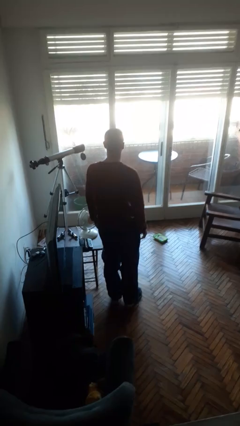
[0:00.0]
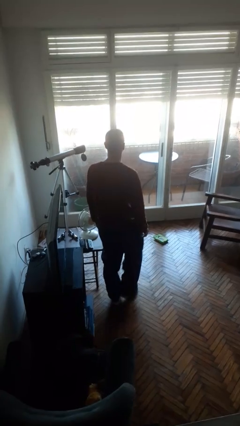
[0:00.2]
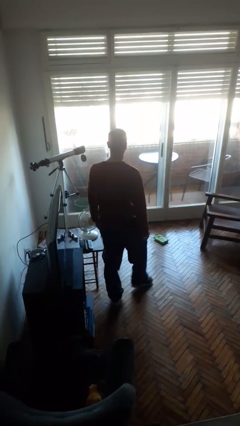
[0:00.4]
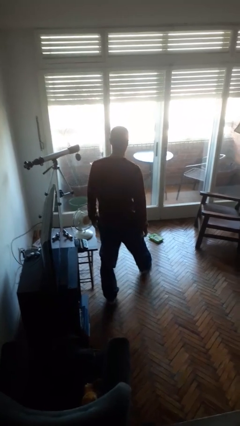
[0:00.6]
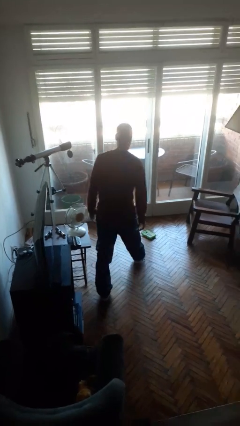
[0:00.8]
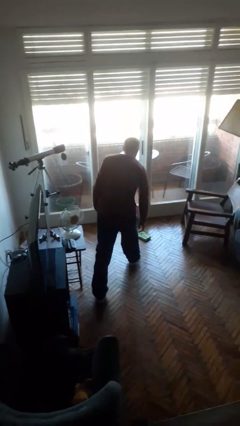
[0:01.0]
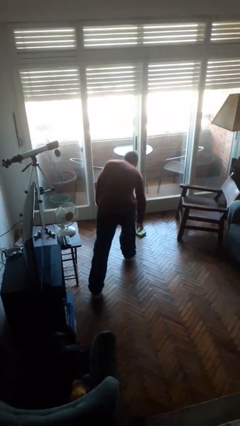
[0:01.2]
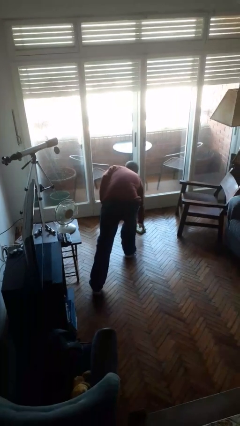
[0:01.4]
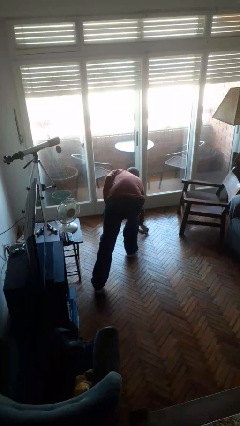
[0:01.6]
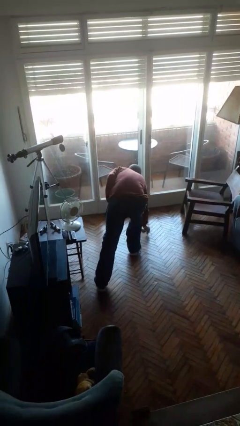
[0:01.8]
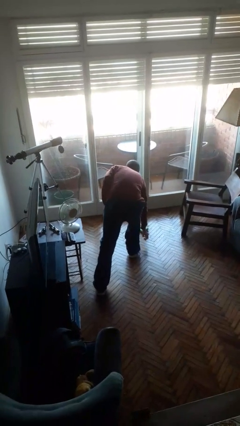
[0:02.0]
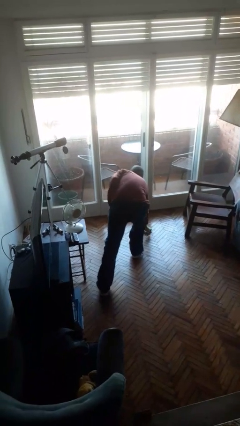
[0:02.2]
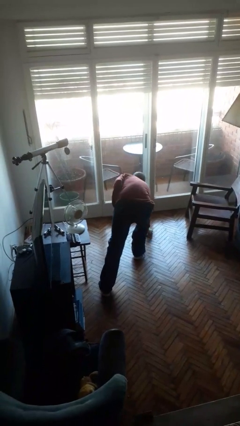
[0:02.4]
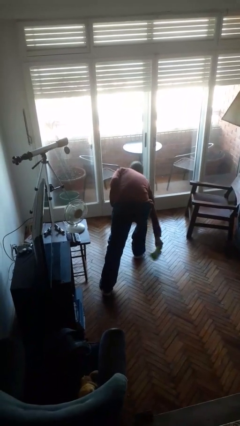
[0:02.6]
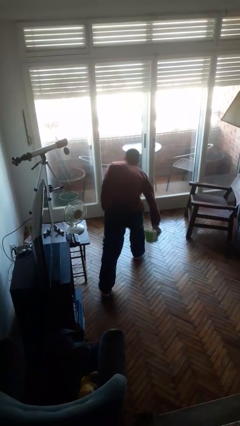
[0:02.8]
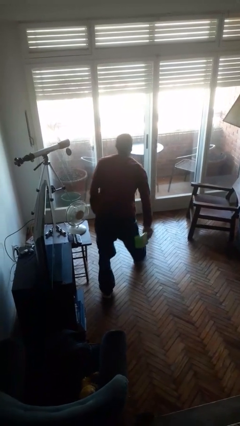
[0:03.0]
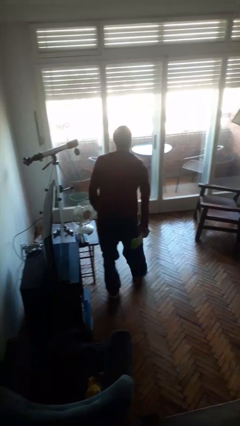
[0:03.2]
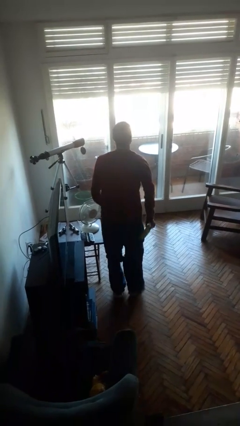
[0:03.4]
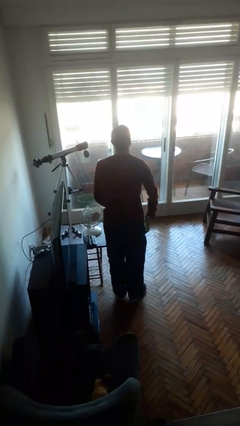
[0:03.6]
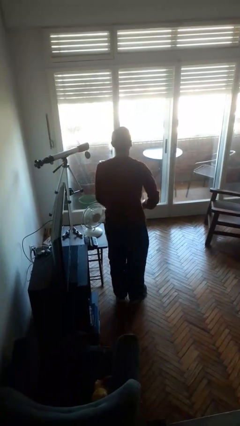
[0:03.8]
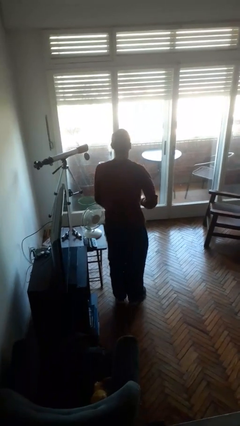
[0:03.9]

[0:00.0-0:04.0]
person picks up object from floor

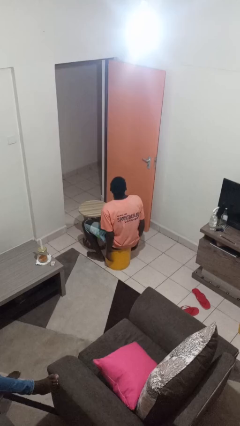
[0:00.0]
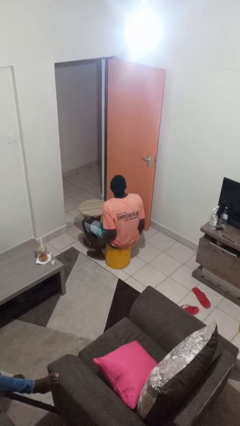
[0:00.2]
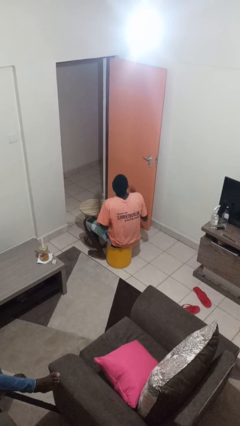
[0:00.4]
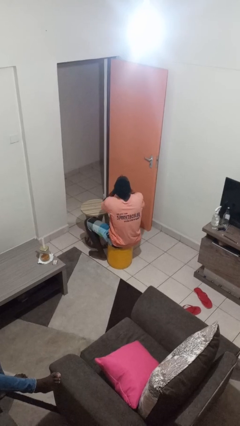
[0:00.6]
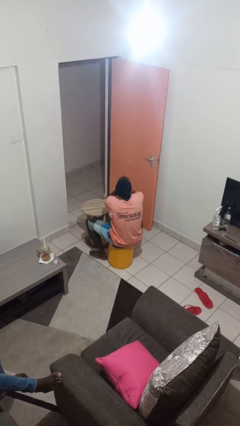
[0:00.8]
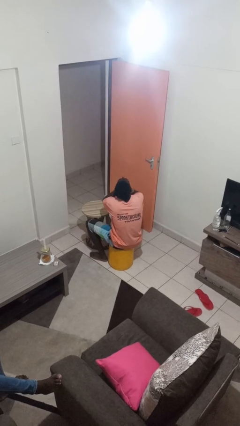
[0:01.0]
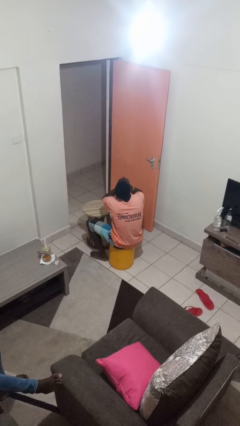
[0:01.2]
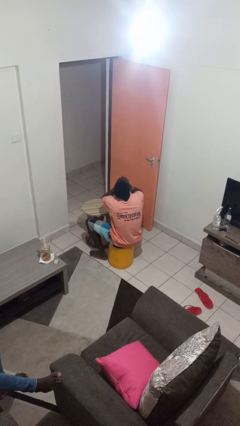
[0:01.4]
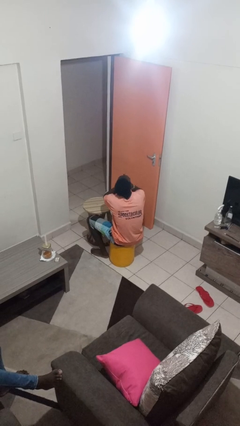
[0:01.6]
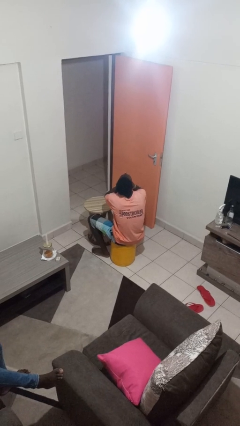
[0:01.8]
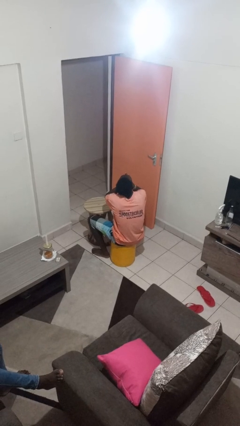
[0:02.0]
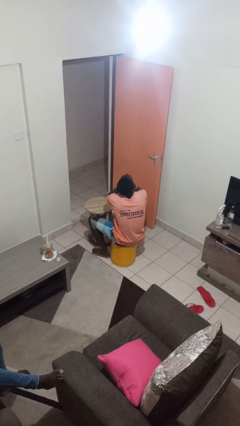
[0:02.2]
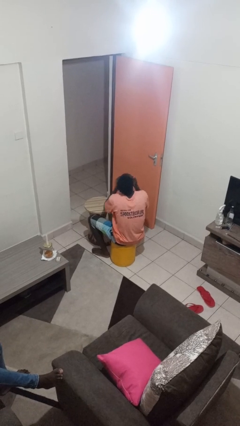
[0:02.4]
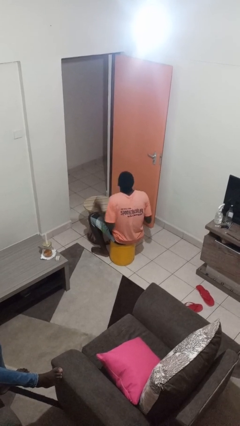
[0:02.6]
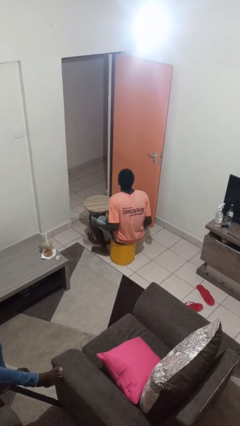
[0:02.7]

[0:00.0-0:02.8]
person yawns

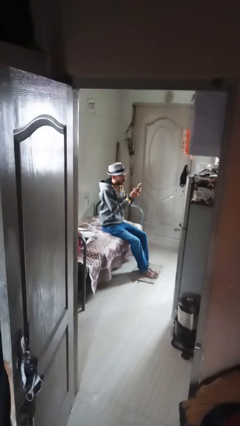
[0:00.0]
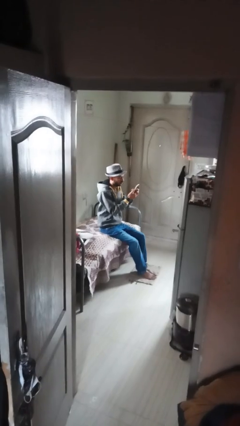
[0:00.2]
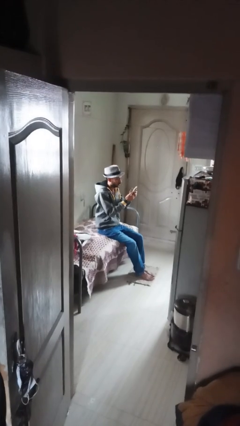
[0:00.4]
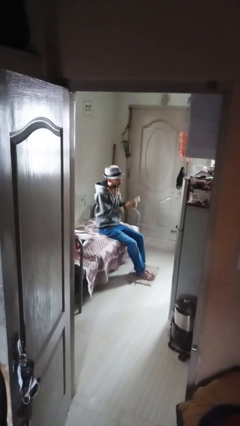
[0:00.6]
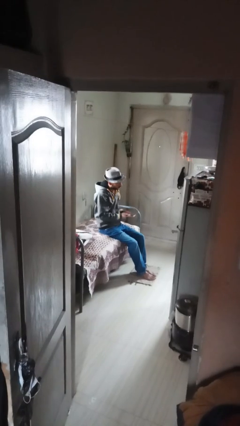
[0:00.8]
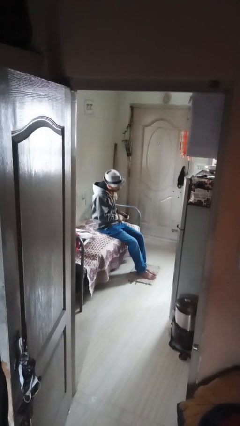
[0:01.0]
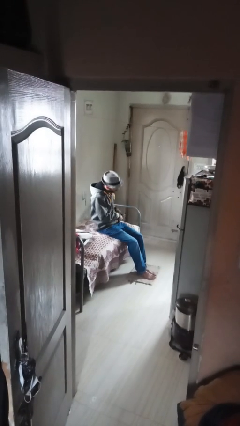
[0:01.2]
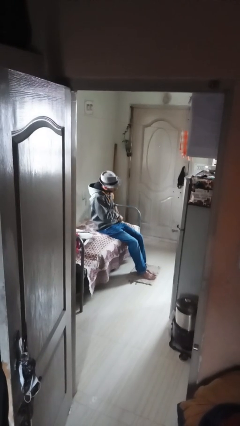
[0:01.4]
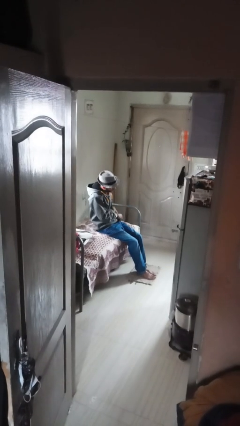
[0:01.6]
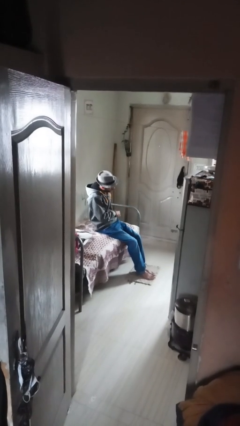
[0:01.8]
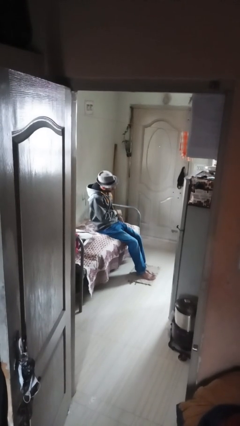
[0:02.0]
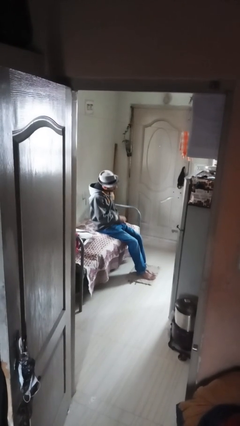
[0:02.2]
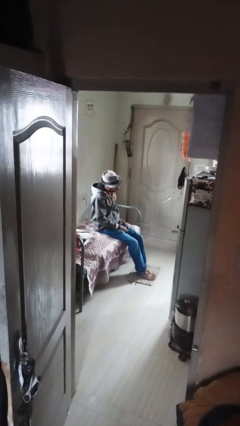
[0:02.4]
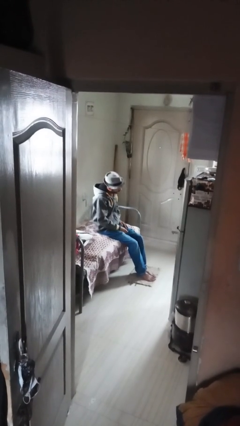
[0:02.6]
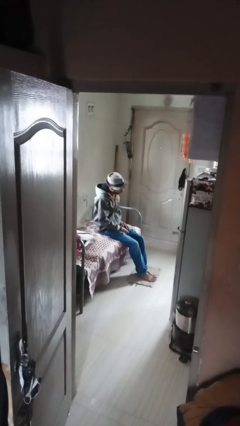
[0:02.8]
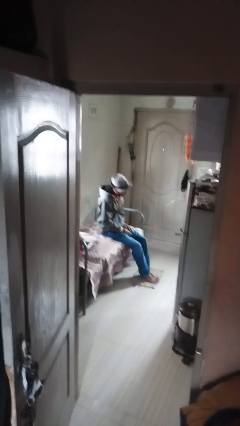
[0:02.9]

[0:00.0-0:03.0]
person puts phone into pocket

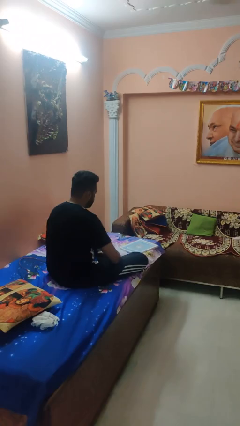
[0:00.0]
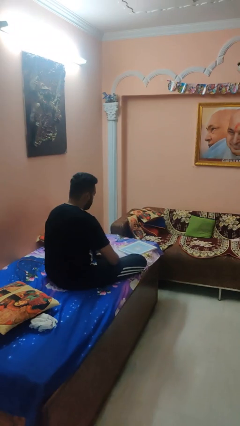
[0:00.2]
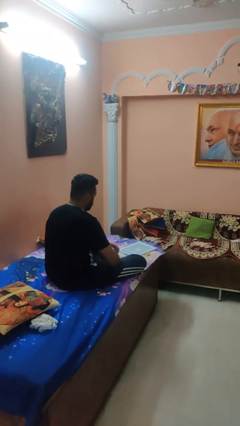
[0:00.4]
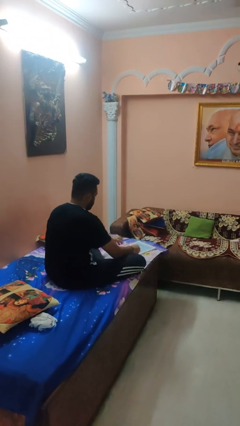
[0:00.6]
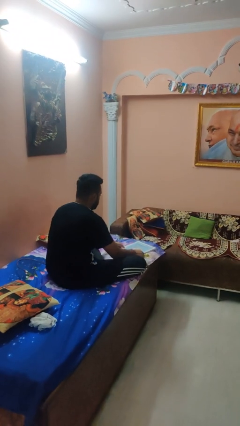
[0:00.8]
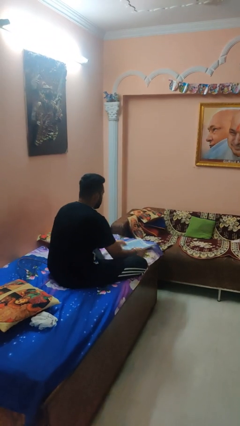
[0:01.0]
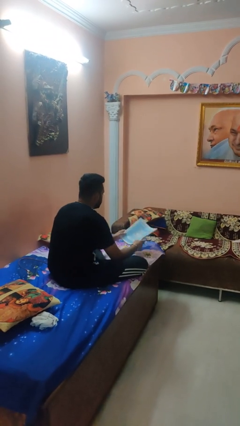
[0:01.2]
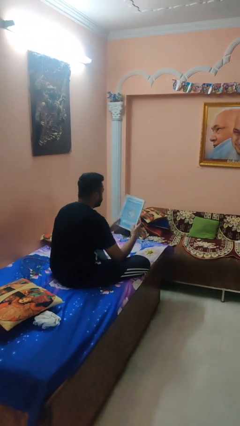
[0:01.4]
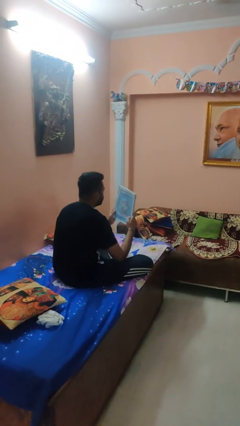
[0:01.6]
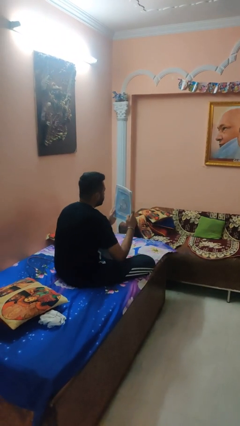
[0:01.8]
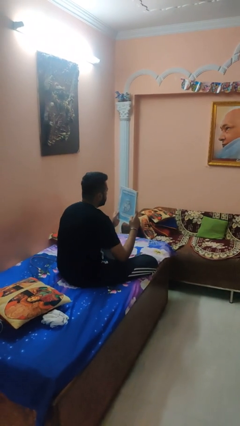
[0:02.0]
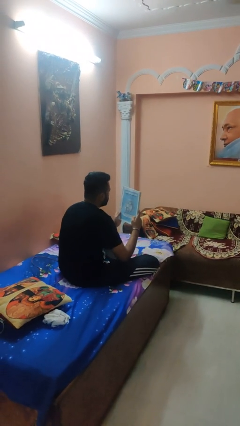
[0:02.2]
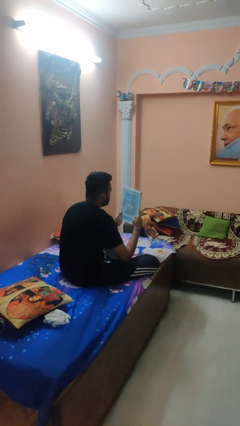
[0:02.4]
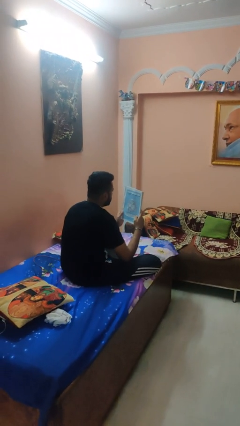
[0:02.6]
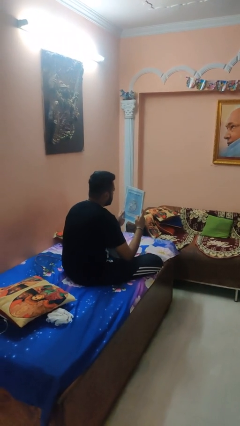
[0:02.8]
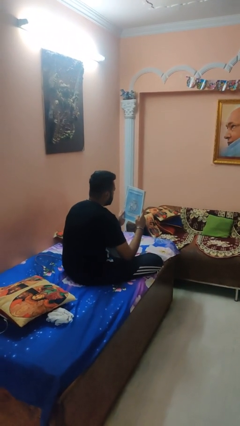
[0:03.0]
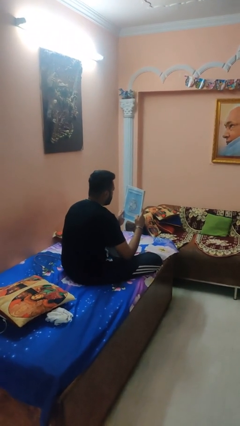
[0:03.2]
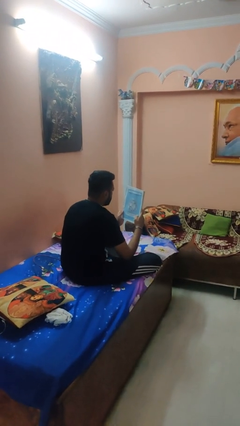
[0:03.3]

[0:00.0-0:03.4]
person picks up object from bed

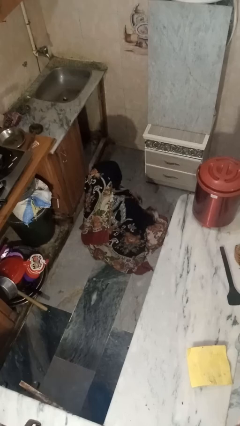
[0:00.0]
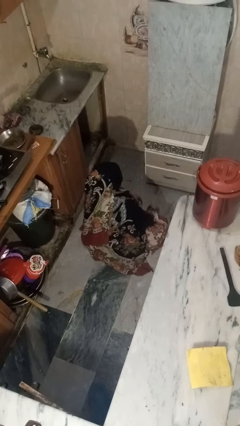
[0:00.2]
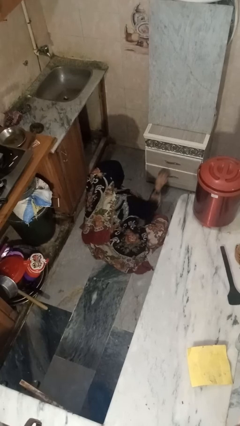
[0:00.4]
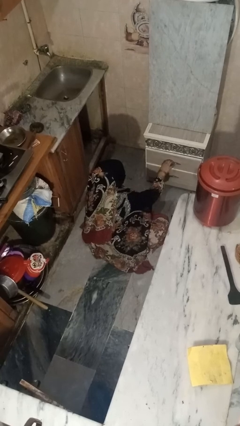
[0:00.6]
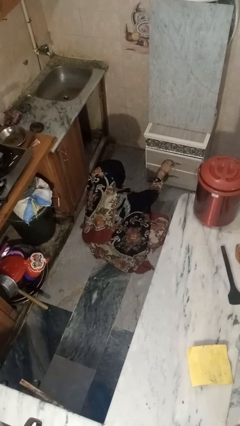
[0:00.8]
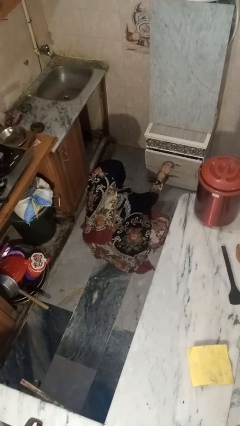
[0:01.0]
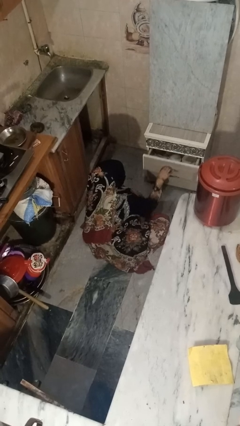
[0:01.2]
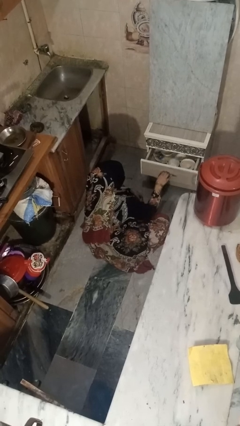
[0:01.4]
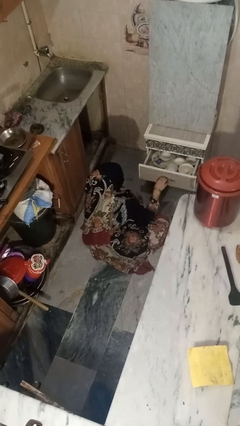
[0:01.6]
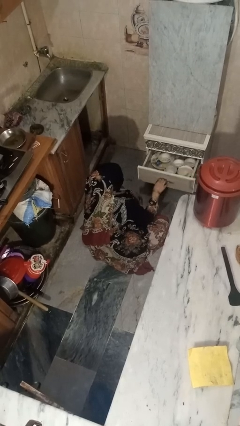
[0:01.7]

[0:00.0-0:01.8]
person opens kitchen drawer

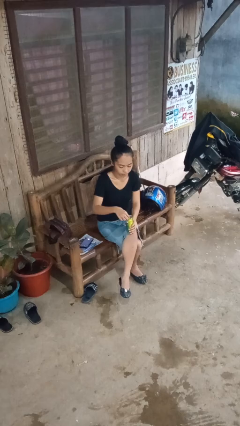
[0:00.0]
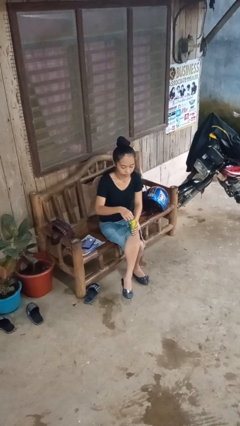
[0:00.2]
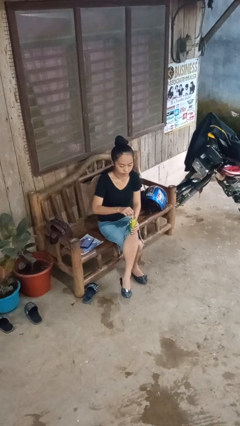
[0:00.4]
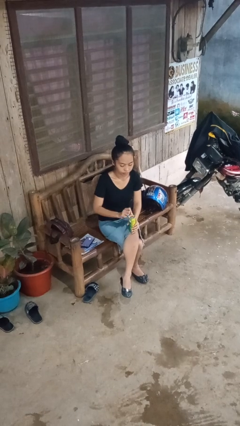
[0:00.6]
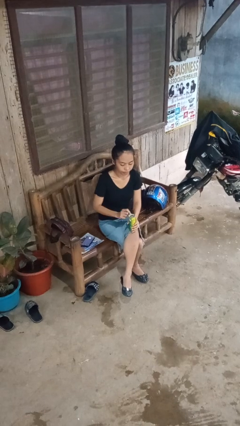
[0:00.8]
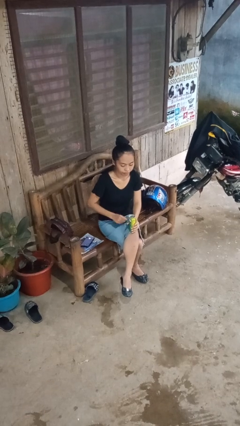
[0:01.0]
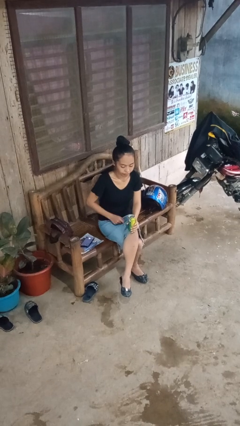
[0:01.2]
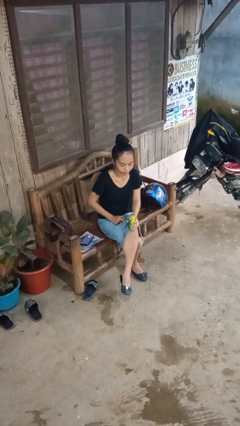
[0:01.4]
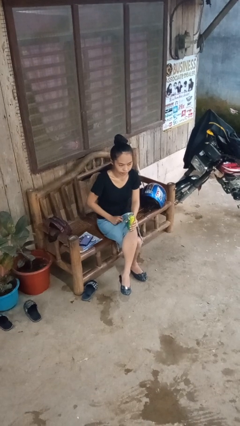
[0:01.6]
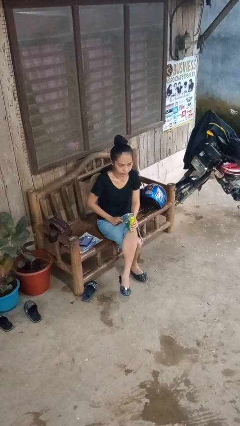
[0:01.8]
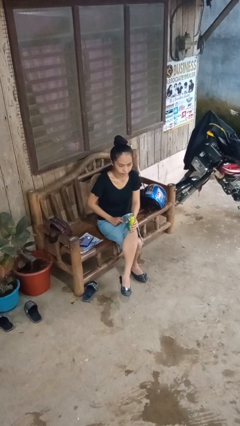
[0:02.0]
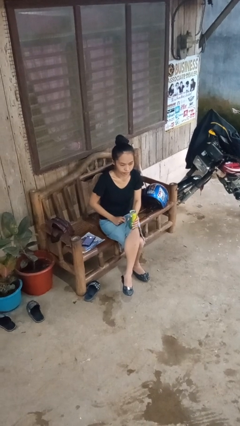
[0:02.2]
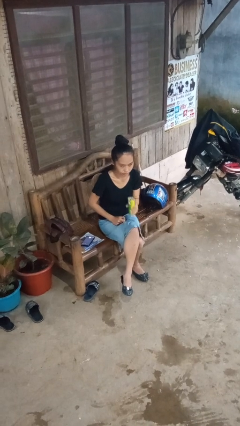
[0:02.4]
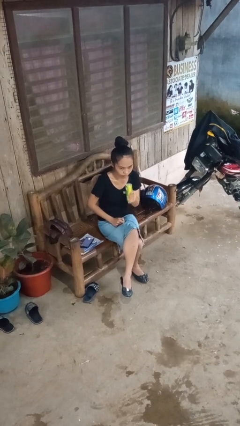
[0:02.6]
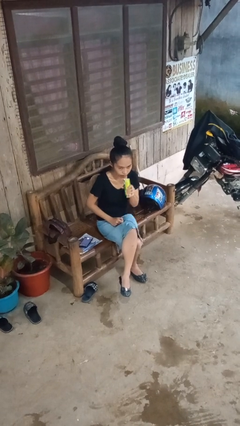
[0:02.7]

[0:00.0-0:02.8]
person opens beverage can
